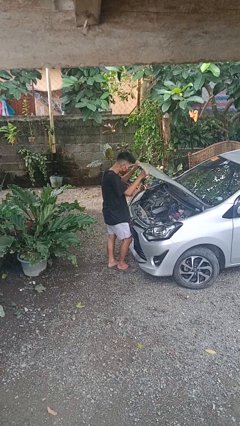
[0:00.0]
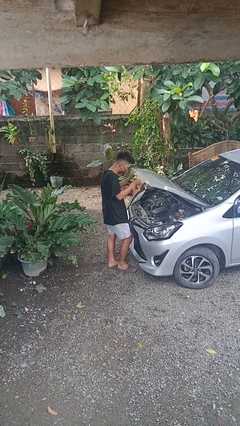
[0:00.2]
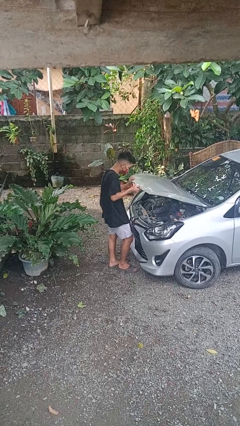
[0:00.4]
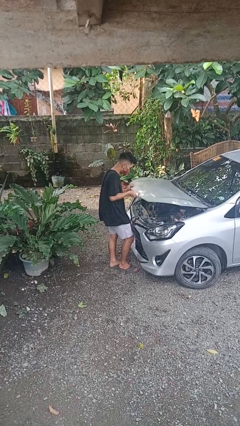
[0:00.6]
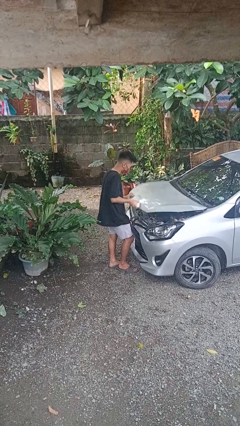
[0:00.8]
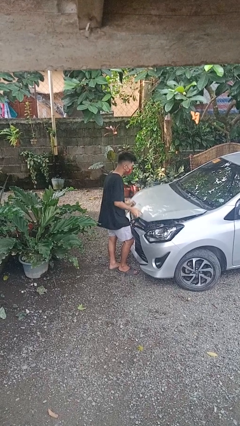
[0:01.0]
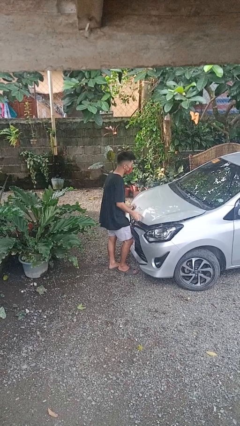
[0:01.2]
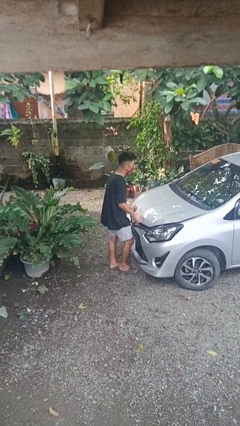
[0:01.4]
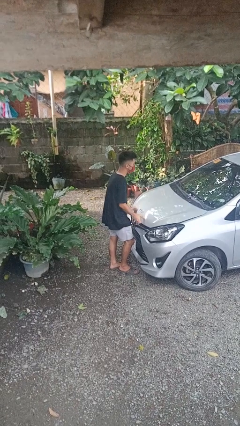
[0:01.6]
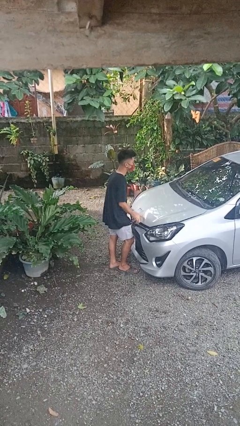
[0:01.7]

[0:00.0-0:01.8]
person closes car hood

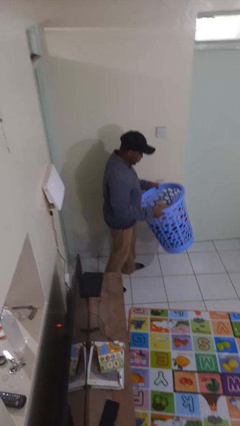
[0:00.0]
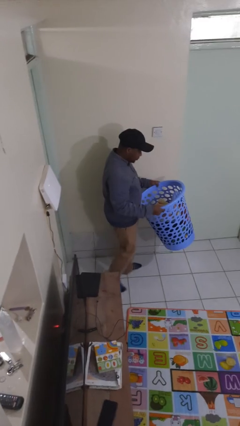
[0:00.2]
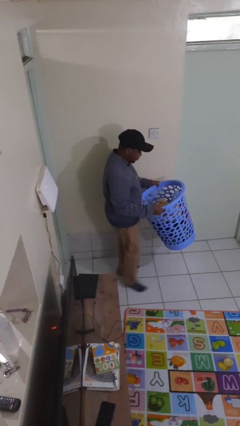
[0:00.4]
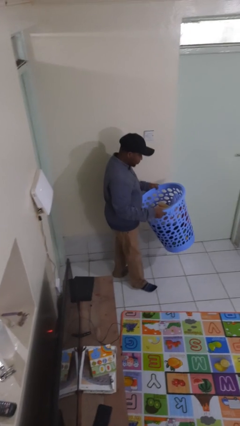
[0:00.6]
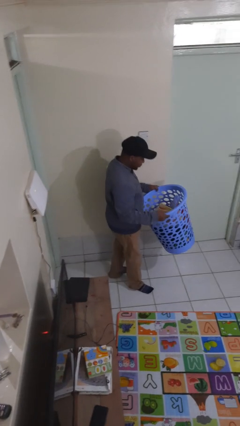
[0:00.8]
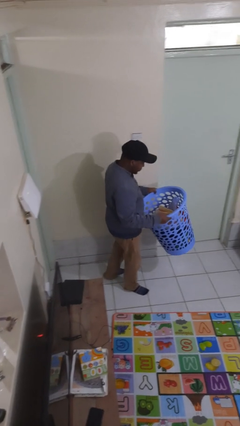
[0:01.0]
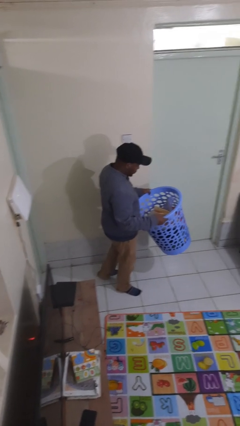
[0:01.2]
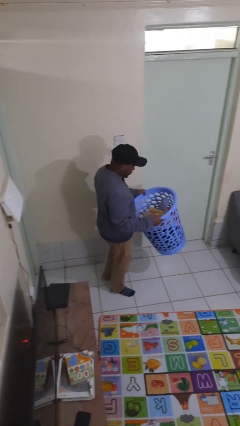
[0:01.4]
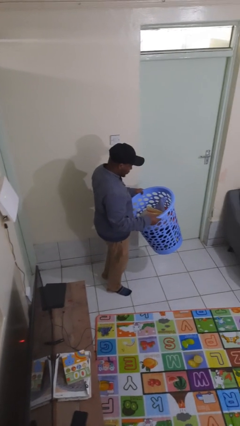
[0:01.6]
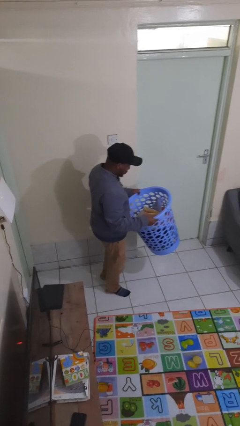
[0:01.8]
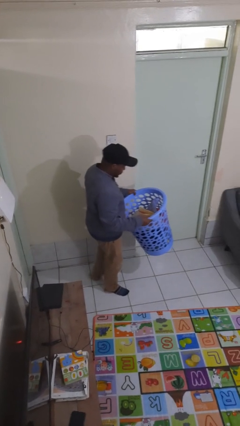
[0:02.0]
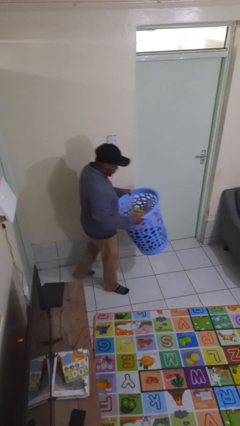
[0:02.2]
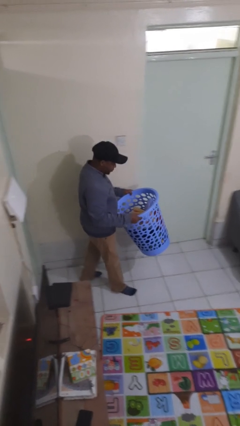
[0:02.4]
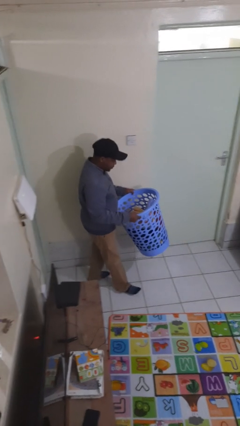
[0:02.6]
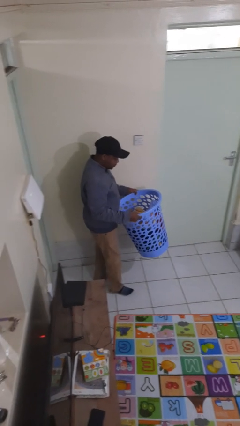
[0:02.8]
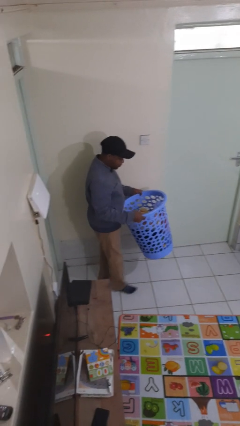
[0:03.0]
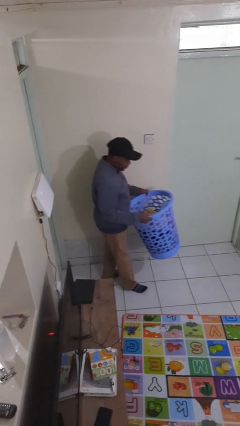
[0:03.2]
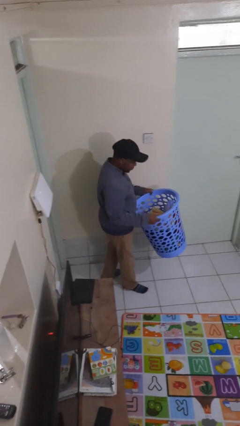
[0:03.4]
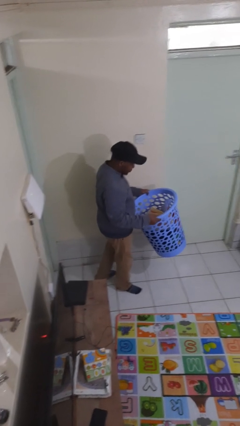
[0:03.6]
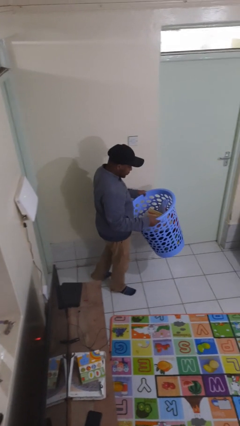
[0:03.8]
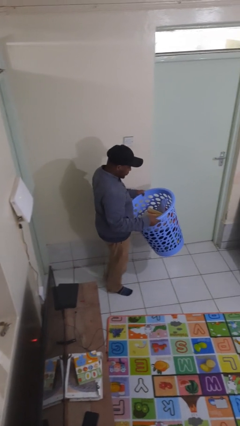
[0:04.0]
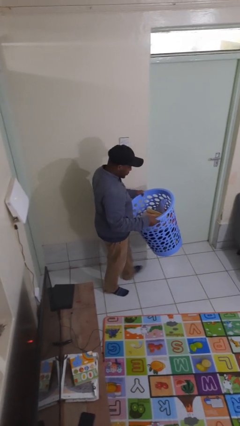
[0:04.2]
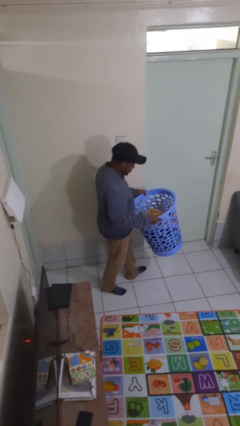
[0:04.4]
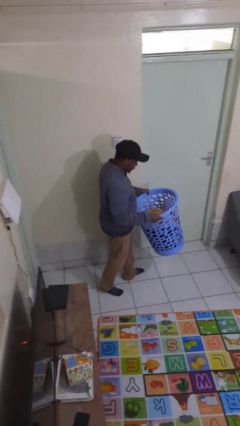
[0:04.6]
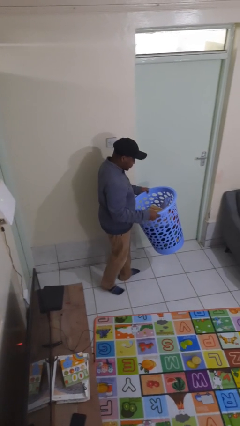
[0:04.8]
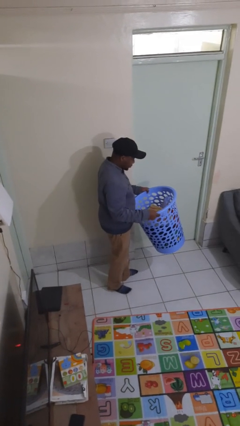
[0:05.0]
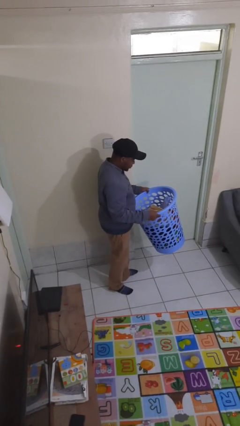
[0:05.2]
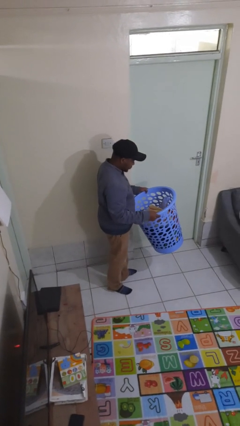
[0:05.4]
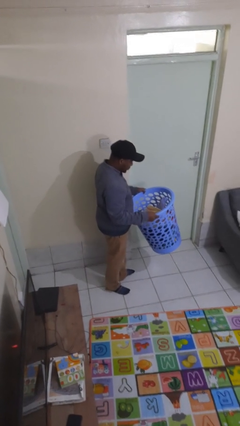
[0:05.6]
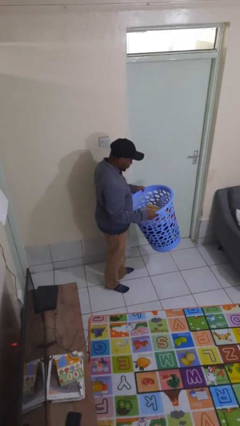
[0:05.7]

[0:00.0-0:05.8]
person carries laundry basket

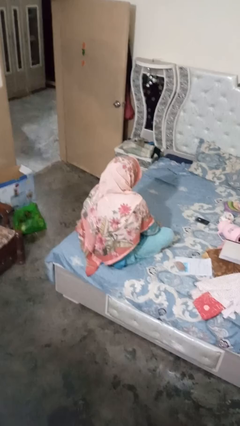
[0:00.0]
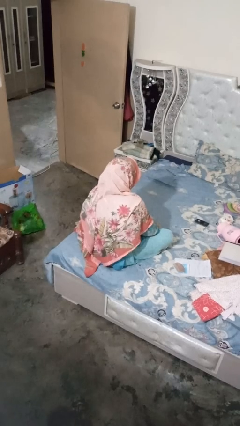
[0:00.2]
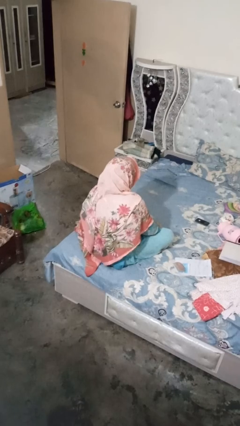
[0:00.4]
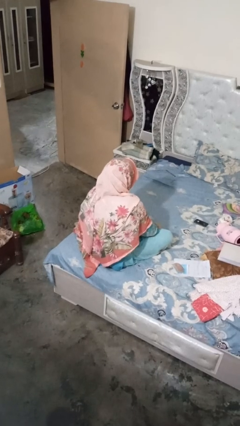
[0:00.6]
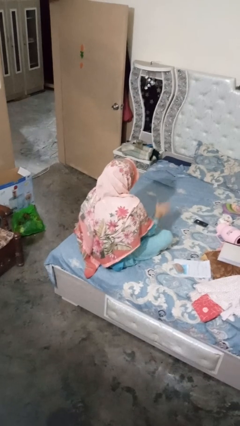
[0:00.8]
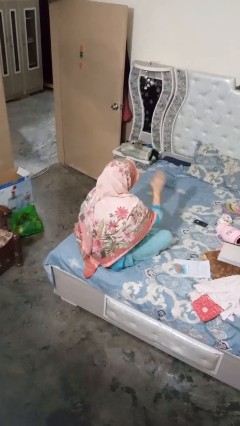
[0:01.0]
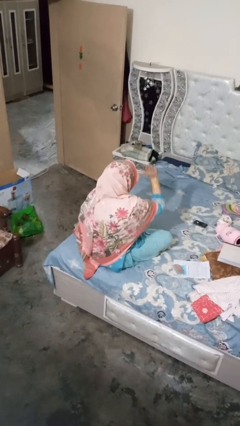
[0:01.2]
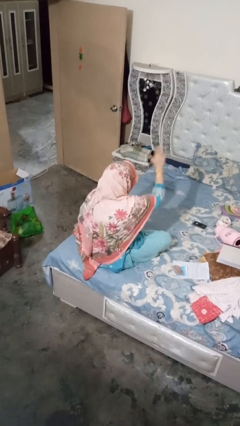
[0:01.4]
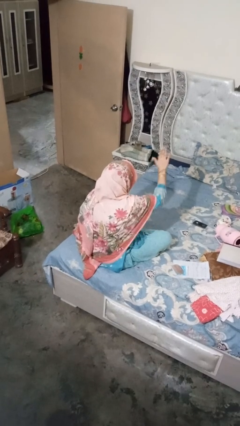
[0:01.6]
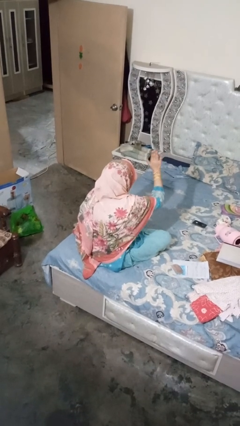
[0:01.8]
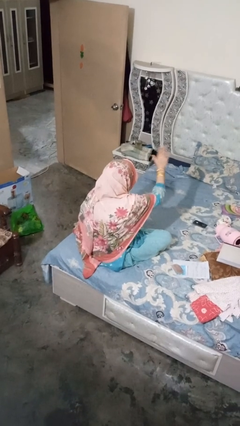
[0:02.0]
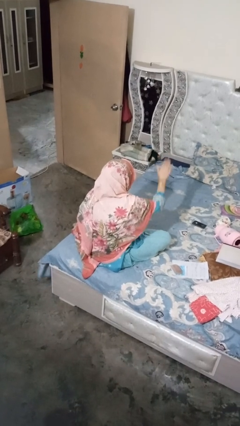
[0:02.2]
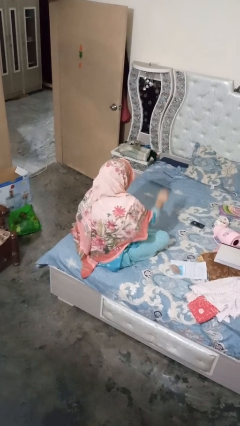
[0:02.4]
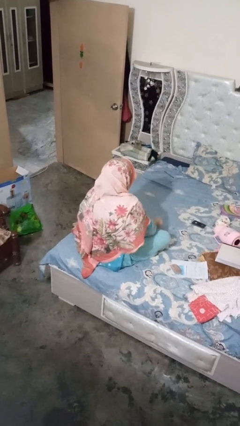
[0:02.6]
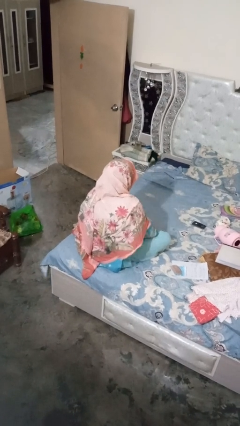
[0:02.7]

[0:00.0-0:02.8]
person gestures stop

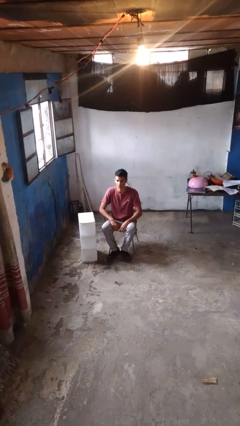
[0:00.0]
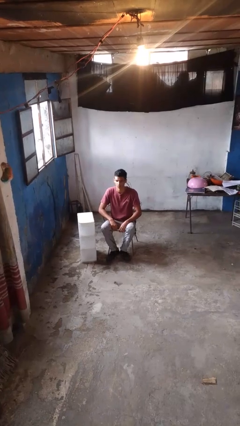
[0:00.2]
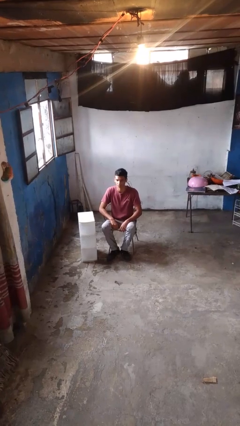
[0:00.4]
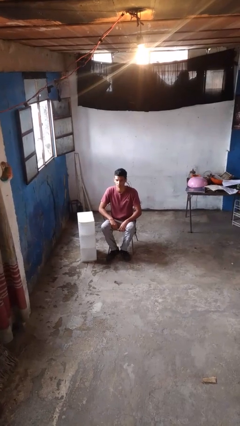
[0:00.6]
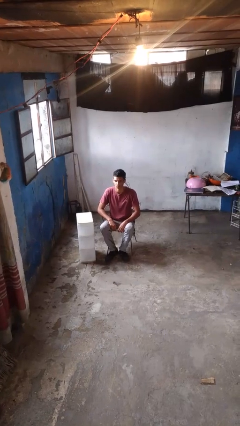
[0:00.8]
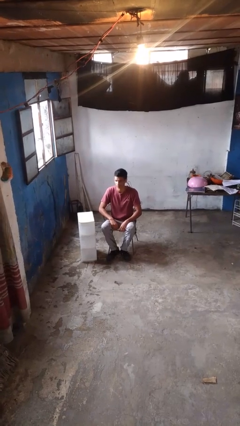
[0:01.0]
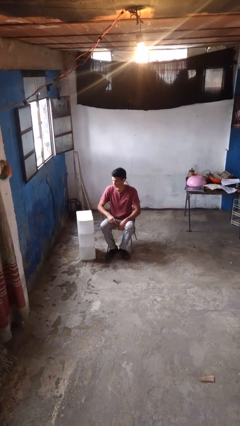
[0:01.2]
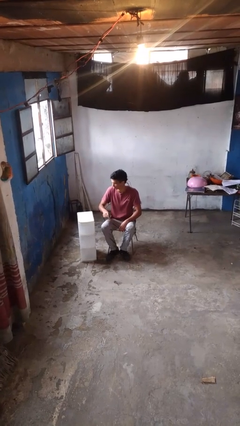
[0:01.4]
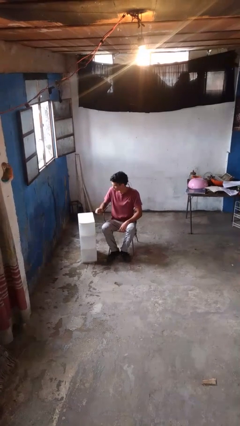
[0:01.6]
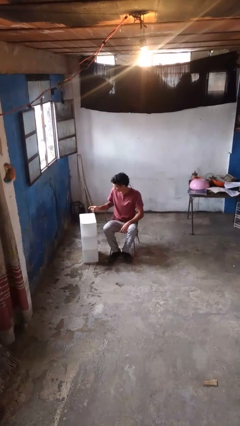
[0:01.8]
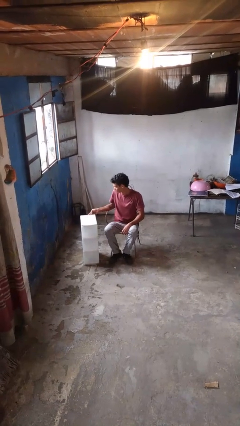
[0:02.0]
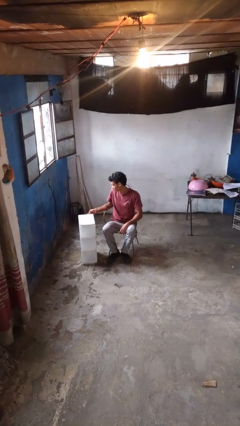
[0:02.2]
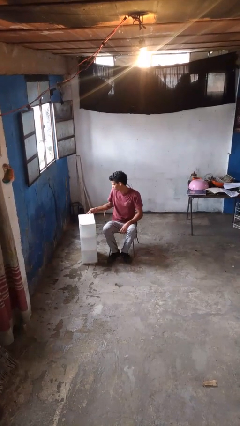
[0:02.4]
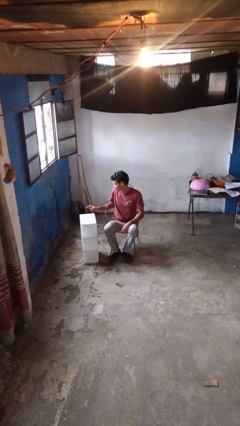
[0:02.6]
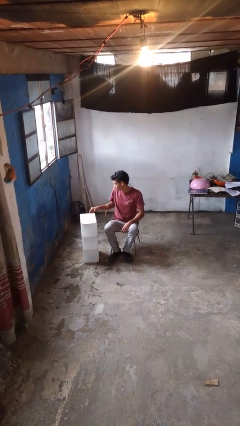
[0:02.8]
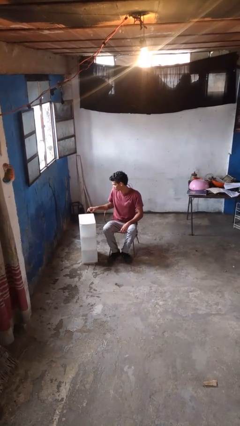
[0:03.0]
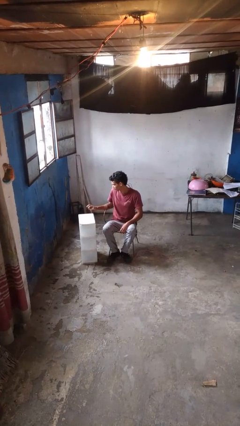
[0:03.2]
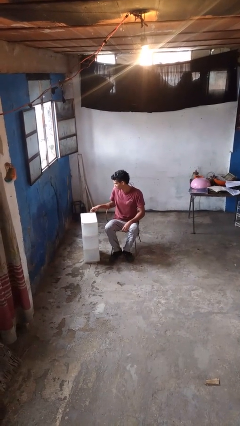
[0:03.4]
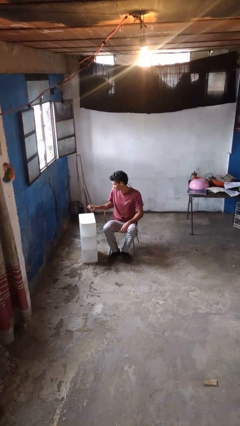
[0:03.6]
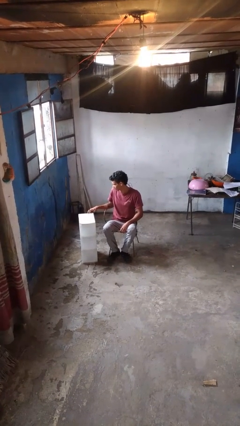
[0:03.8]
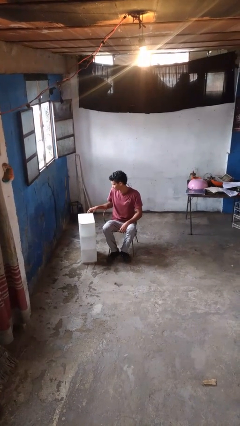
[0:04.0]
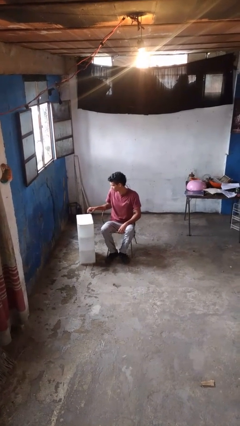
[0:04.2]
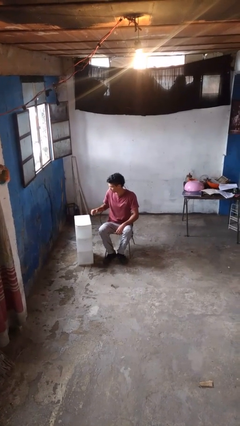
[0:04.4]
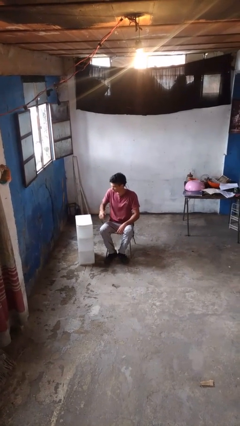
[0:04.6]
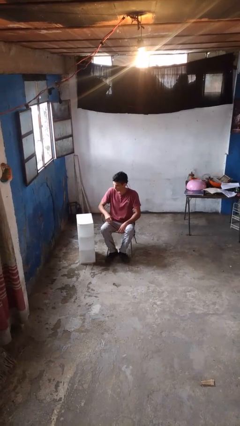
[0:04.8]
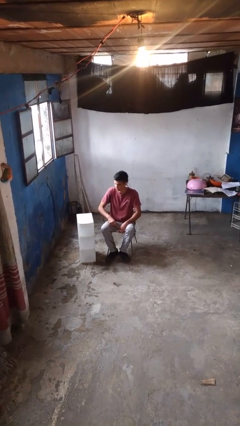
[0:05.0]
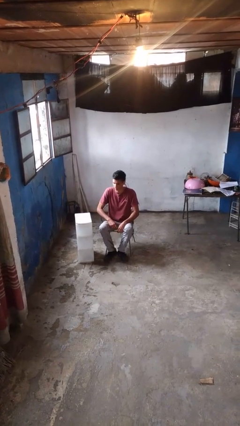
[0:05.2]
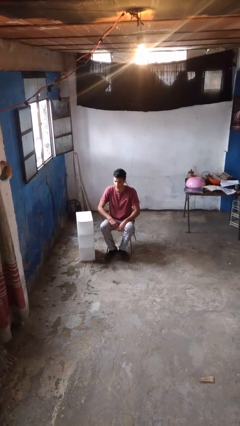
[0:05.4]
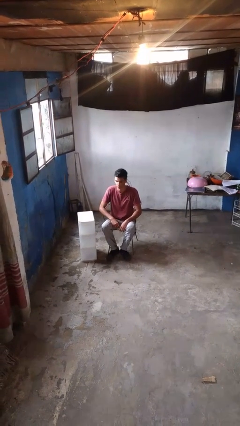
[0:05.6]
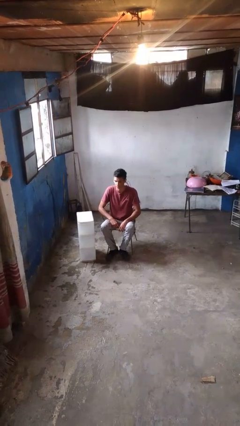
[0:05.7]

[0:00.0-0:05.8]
person taps object with finger

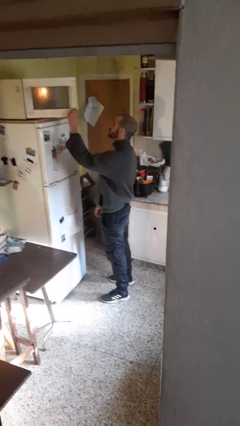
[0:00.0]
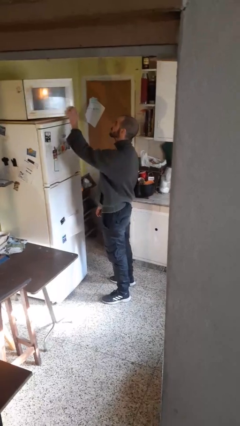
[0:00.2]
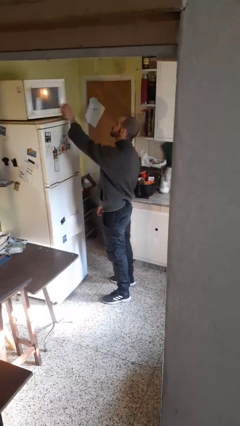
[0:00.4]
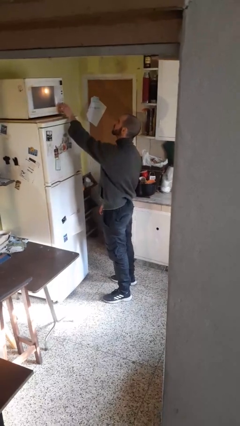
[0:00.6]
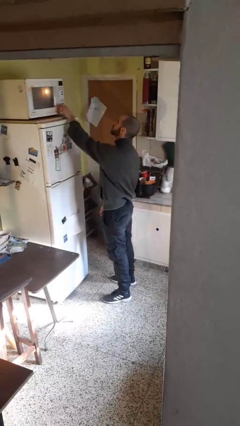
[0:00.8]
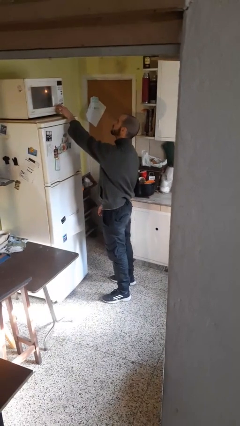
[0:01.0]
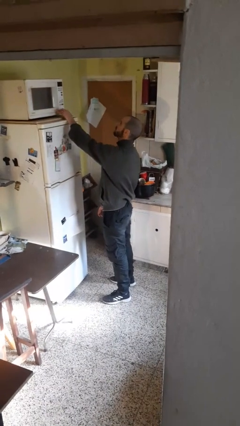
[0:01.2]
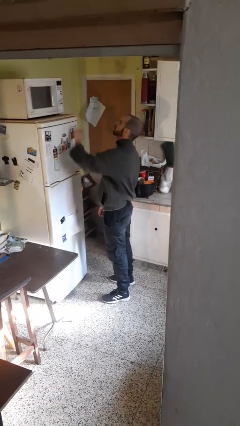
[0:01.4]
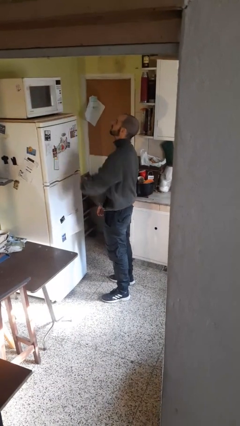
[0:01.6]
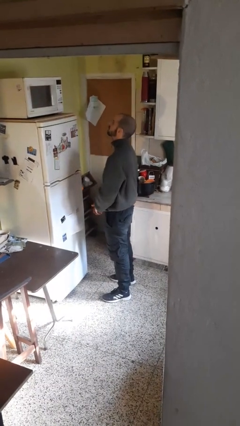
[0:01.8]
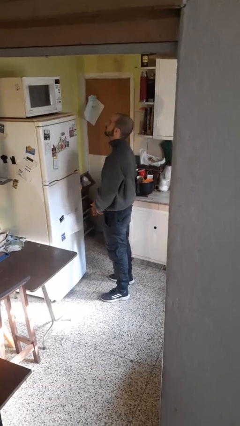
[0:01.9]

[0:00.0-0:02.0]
person closes microwave
